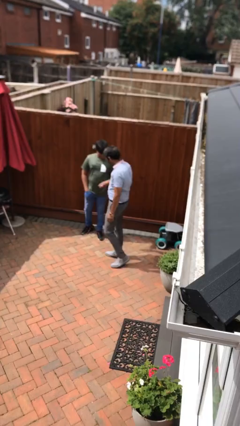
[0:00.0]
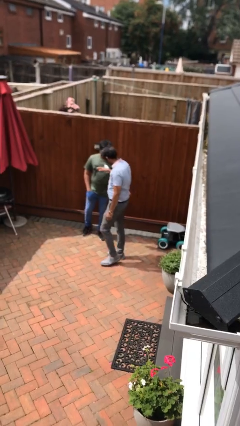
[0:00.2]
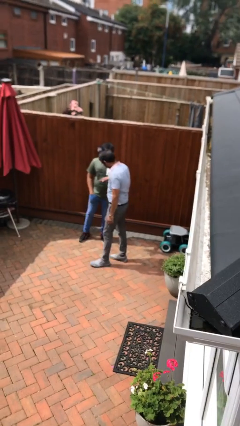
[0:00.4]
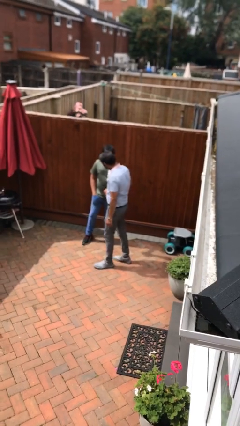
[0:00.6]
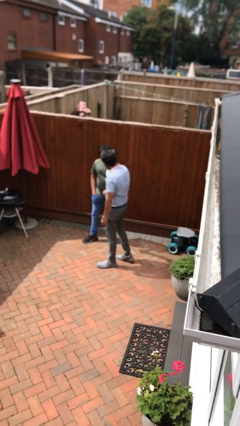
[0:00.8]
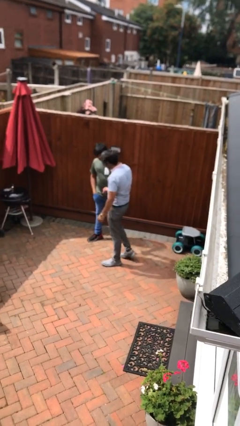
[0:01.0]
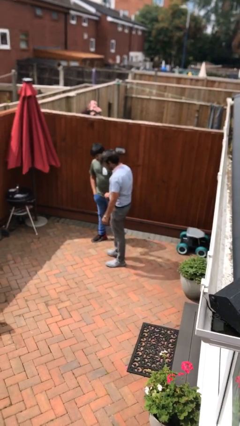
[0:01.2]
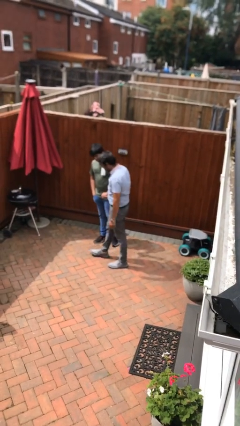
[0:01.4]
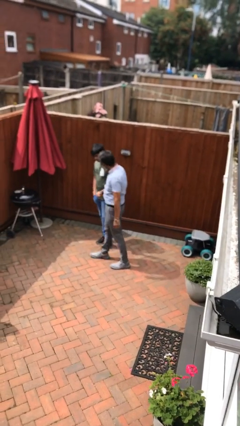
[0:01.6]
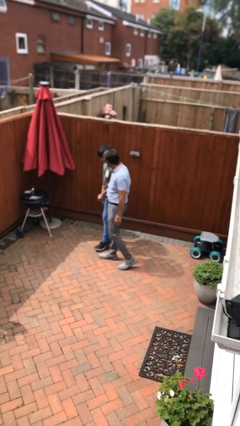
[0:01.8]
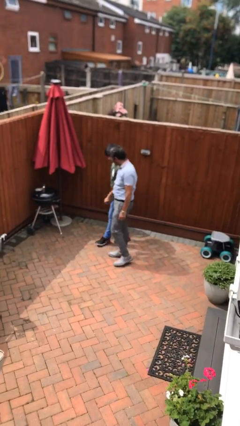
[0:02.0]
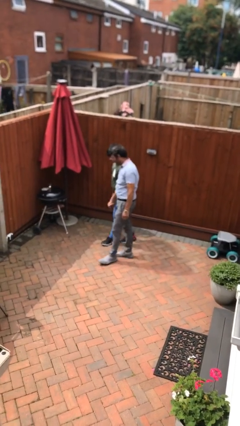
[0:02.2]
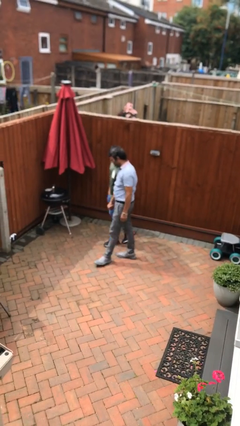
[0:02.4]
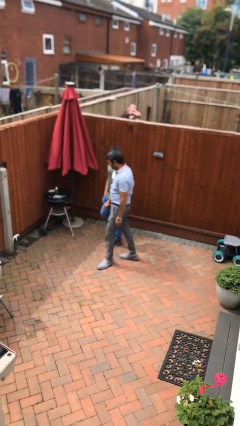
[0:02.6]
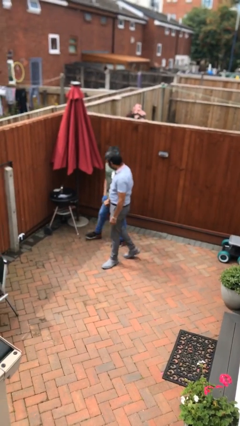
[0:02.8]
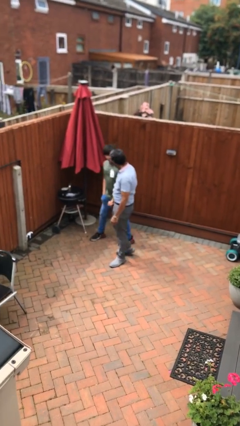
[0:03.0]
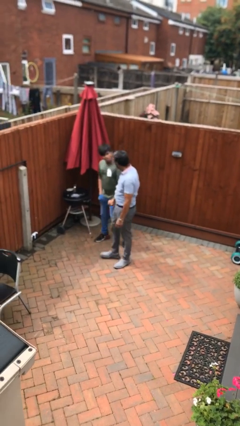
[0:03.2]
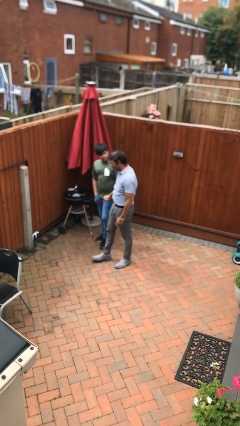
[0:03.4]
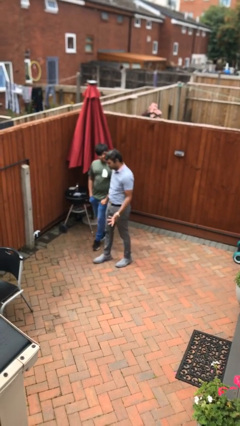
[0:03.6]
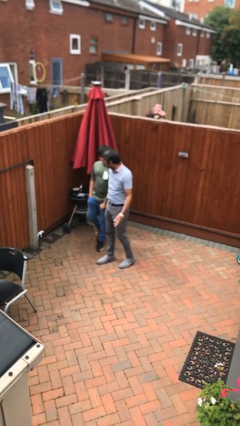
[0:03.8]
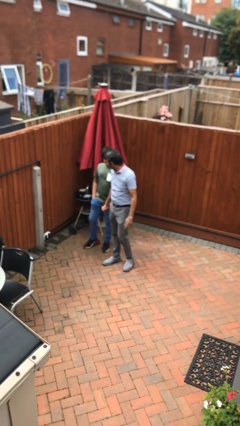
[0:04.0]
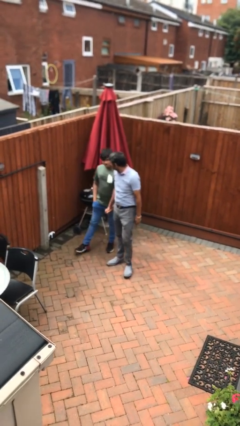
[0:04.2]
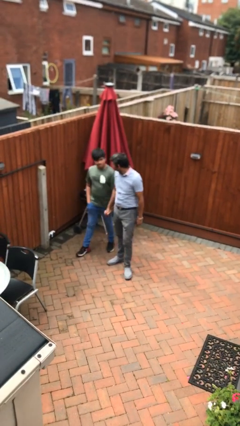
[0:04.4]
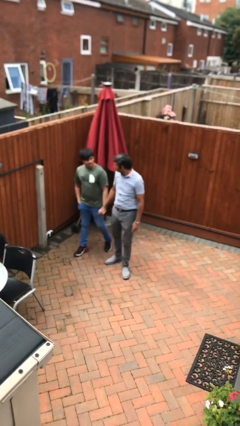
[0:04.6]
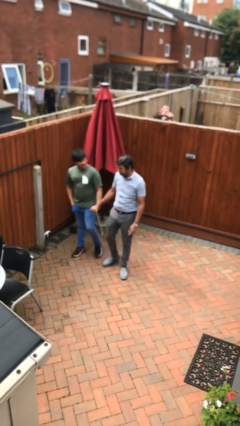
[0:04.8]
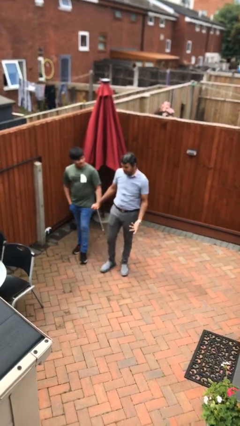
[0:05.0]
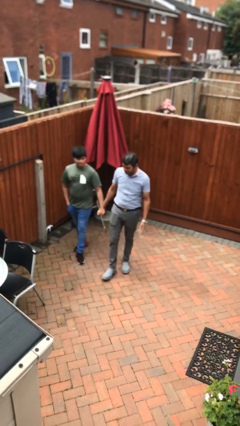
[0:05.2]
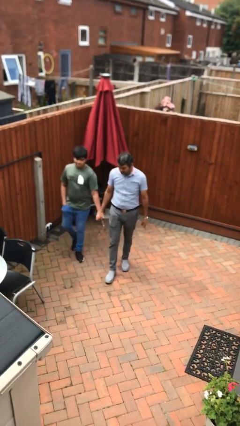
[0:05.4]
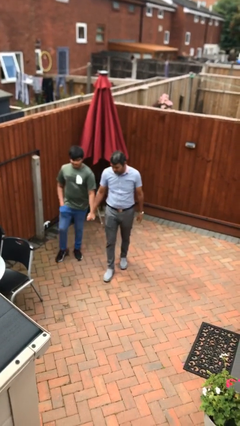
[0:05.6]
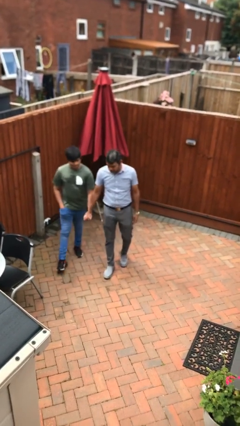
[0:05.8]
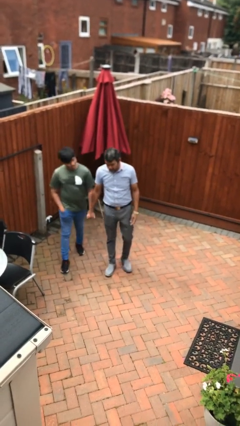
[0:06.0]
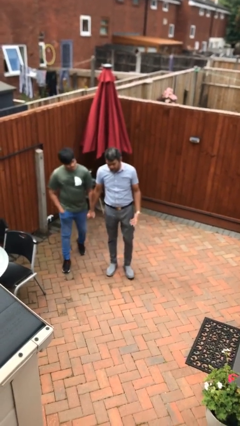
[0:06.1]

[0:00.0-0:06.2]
person holds hand

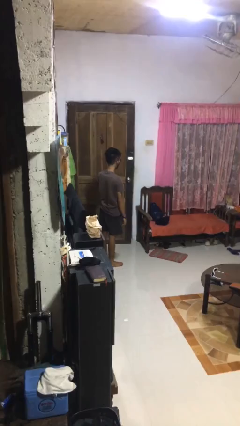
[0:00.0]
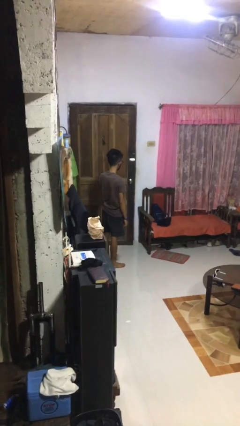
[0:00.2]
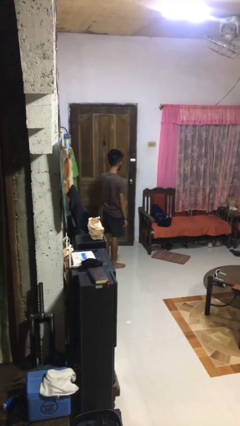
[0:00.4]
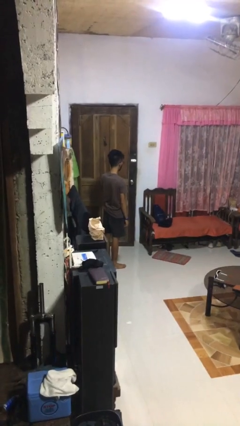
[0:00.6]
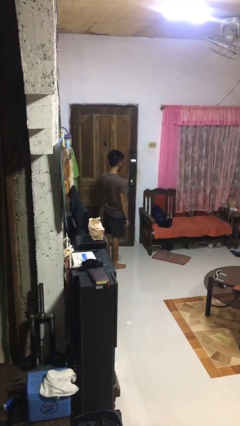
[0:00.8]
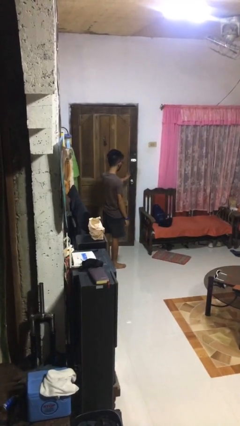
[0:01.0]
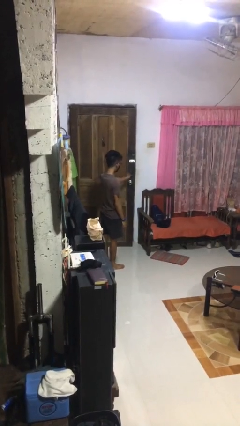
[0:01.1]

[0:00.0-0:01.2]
person closes door with foot

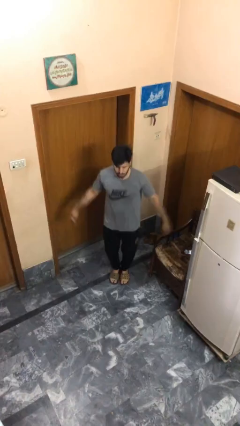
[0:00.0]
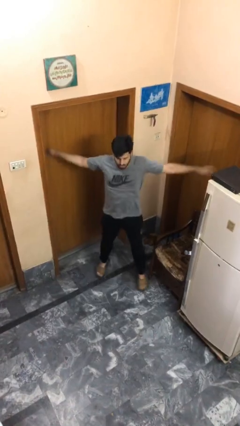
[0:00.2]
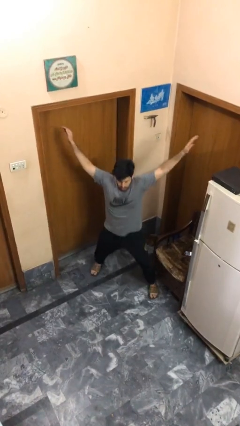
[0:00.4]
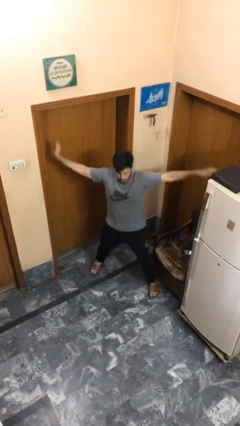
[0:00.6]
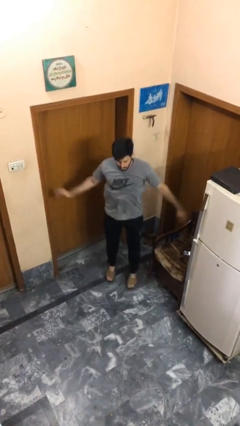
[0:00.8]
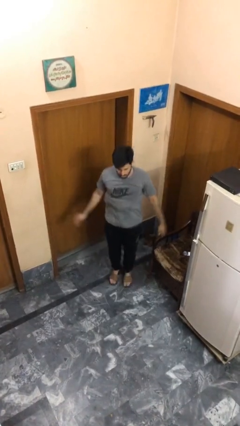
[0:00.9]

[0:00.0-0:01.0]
person exercises with jumping jacks

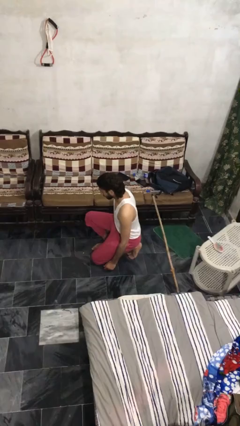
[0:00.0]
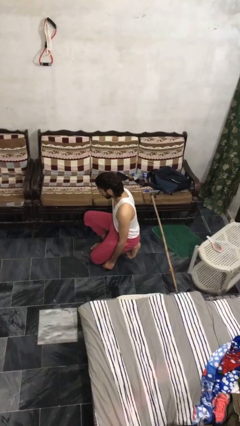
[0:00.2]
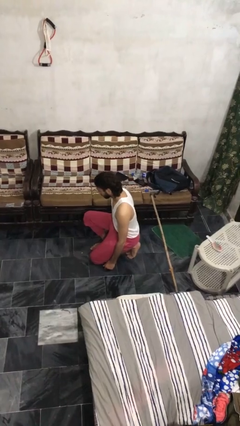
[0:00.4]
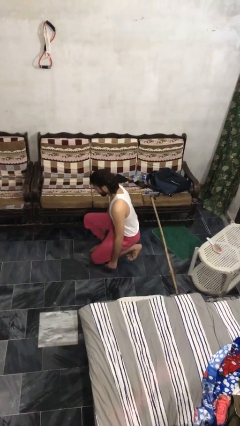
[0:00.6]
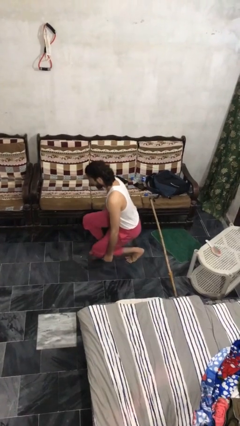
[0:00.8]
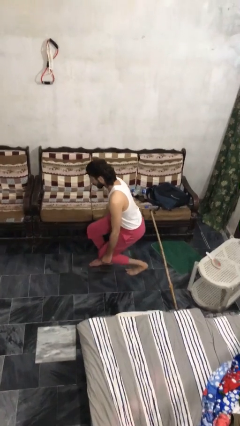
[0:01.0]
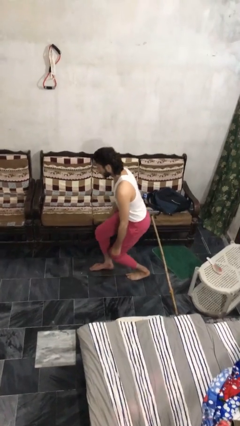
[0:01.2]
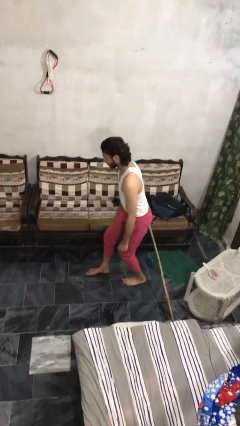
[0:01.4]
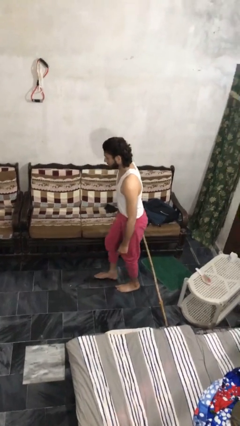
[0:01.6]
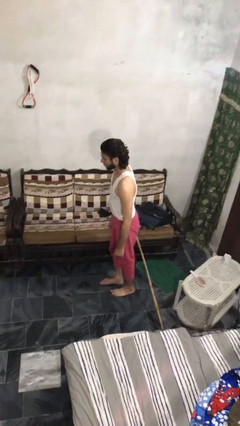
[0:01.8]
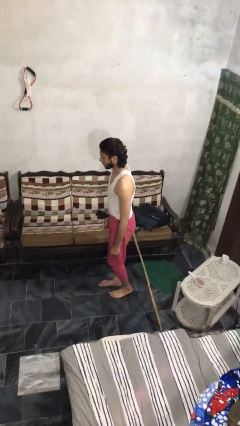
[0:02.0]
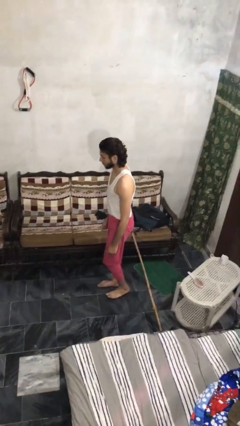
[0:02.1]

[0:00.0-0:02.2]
person stands up from floor

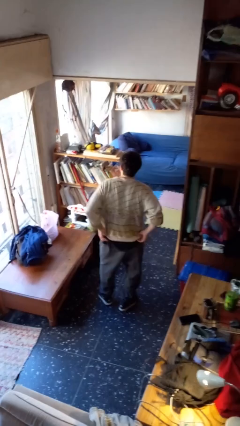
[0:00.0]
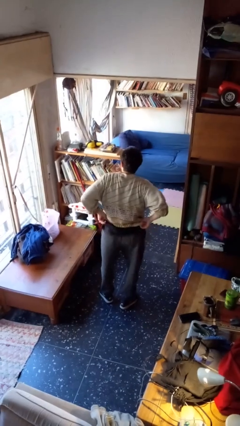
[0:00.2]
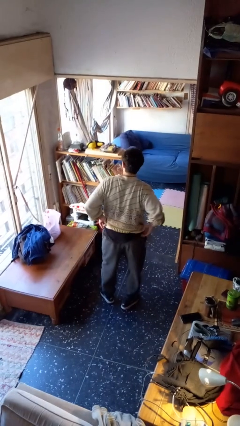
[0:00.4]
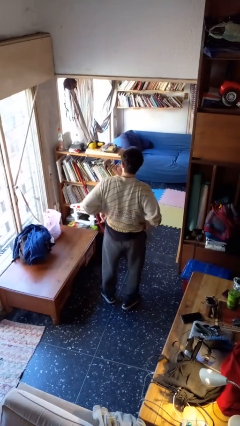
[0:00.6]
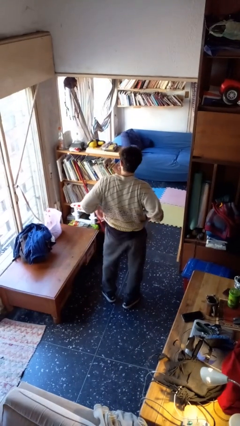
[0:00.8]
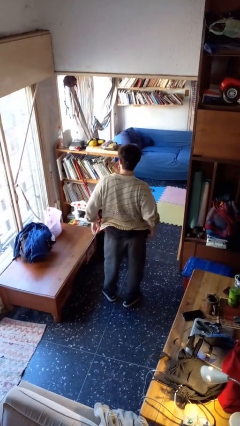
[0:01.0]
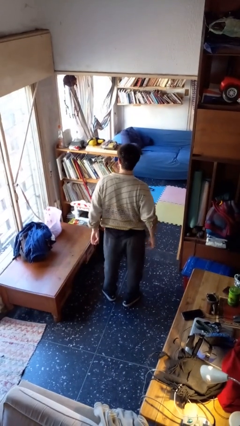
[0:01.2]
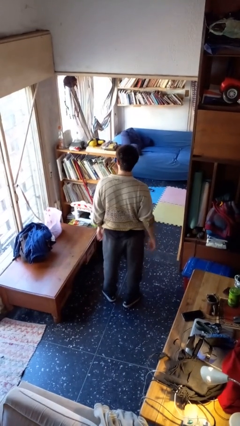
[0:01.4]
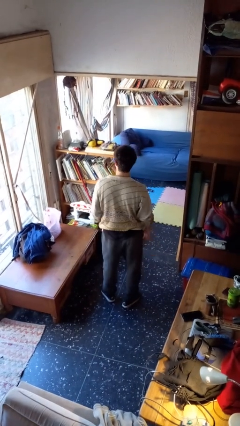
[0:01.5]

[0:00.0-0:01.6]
person hikes up pants

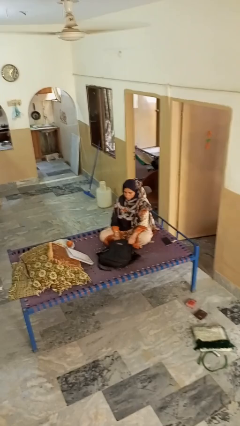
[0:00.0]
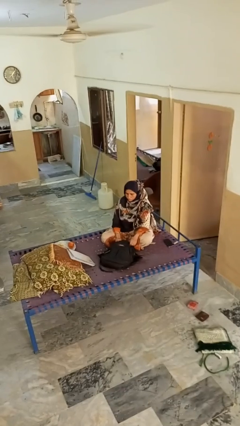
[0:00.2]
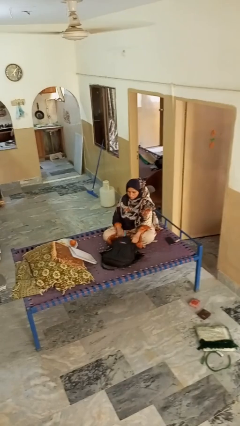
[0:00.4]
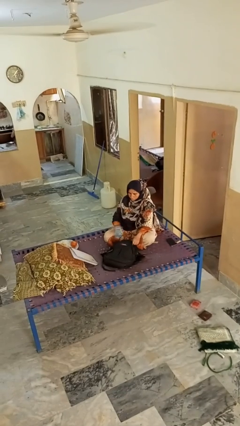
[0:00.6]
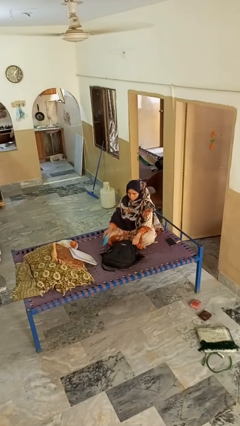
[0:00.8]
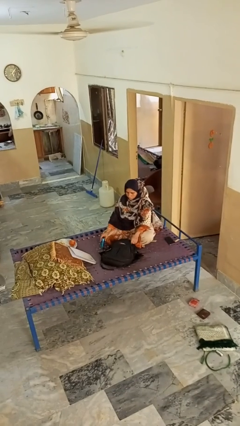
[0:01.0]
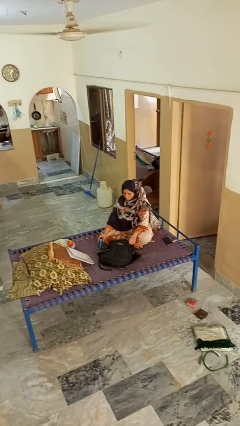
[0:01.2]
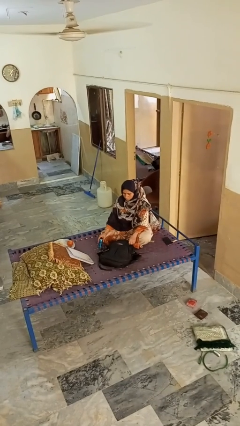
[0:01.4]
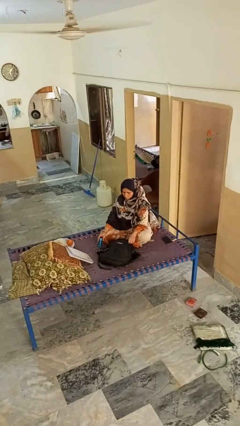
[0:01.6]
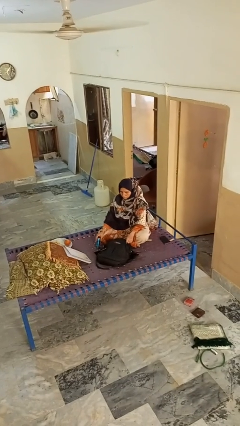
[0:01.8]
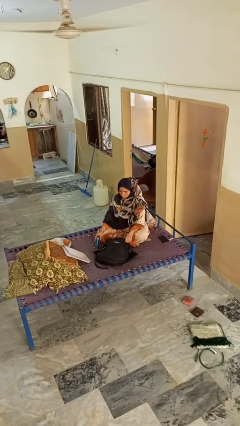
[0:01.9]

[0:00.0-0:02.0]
person takes object from bag

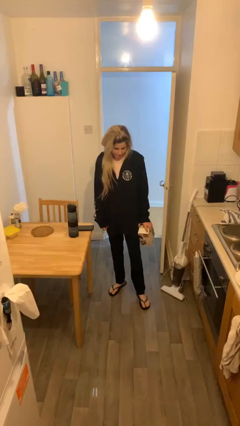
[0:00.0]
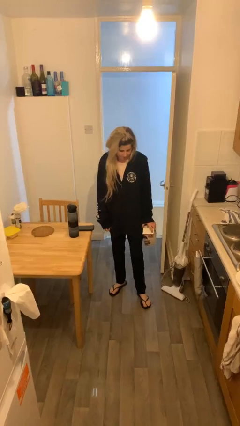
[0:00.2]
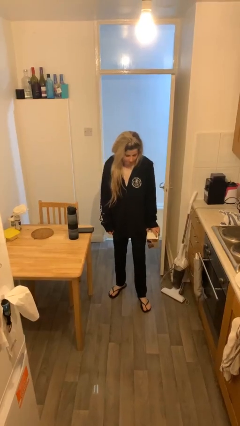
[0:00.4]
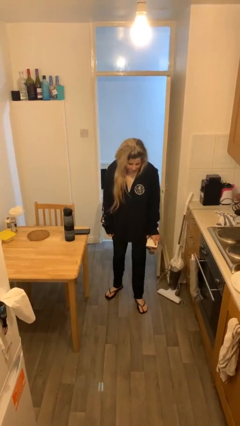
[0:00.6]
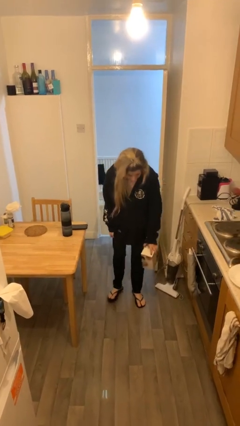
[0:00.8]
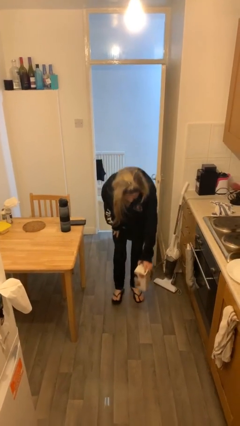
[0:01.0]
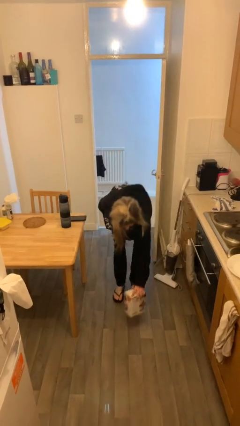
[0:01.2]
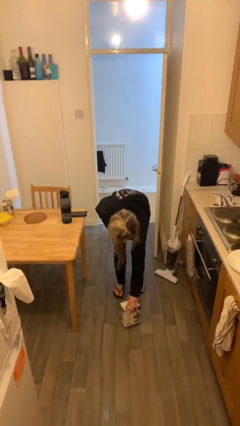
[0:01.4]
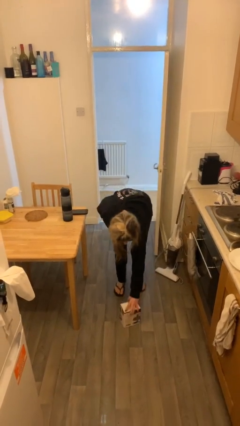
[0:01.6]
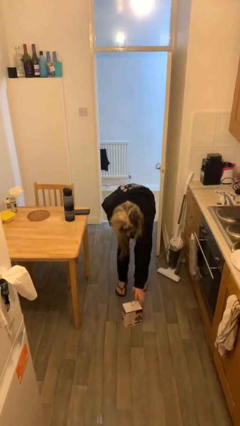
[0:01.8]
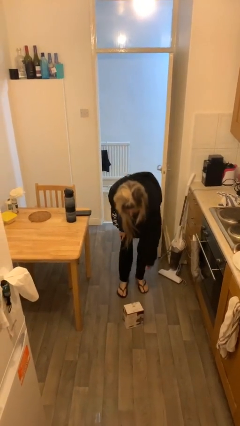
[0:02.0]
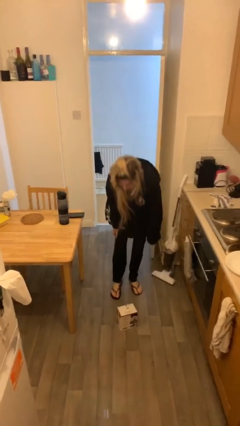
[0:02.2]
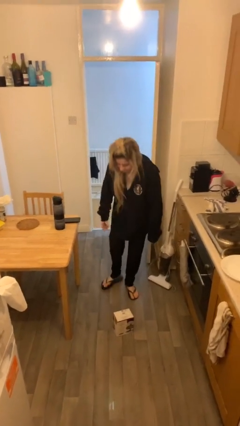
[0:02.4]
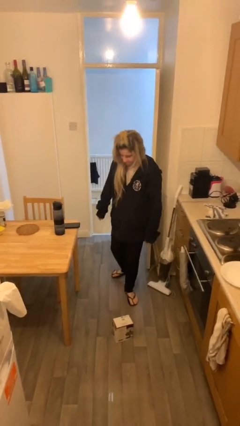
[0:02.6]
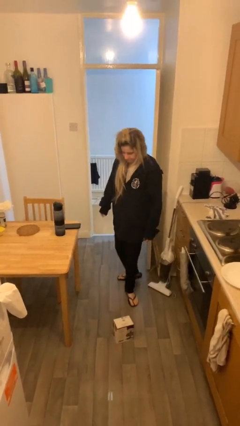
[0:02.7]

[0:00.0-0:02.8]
person puts down object on floor
